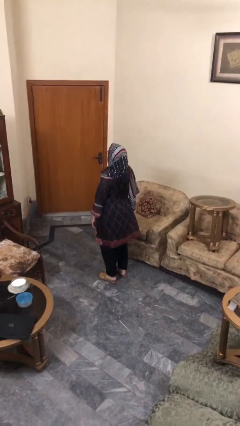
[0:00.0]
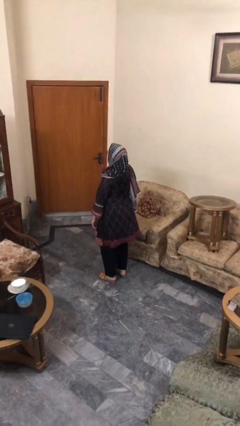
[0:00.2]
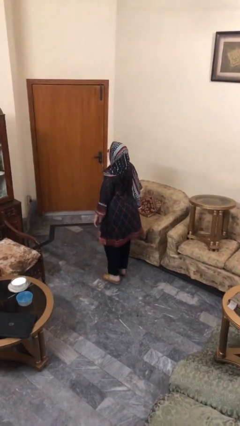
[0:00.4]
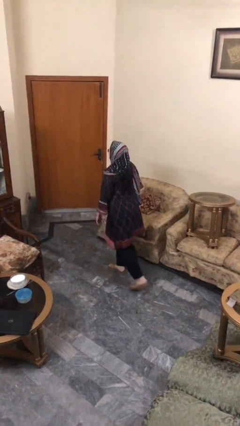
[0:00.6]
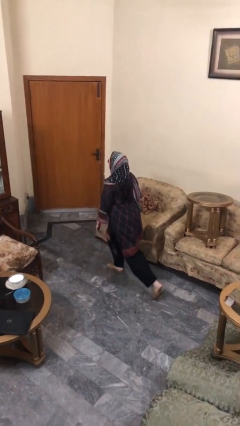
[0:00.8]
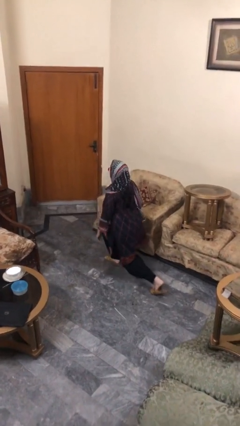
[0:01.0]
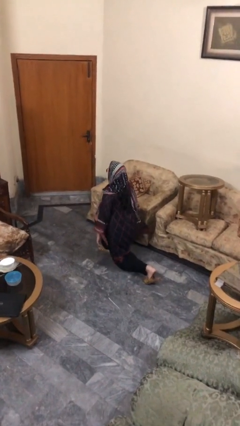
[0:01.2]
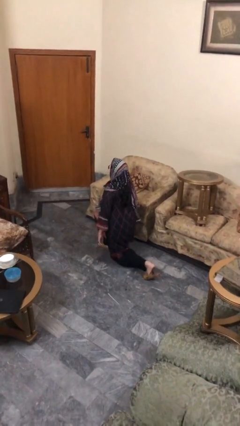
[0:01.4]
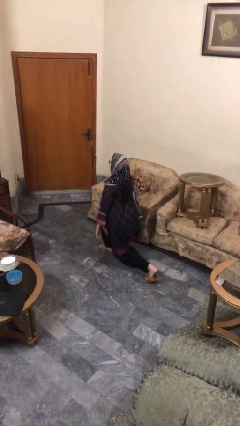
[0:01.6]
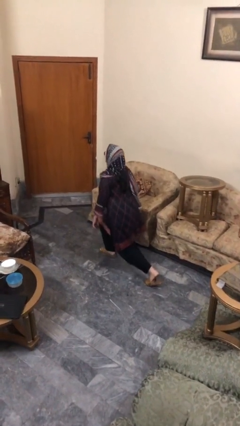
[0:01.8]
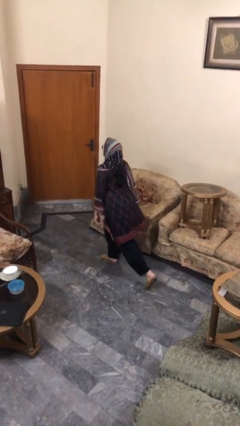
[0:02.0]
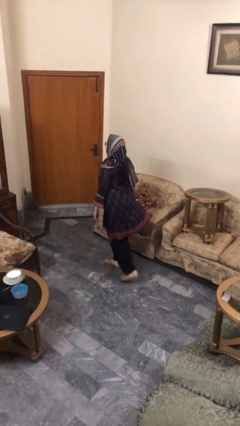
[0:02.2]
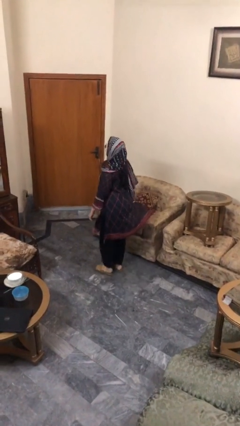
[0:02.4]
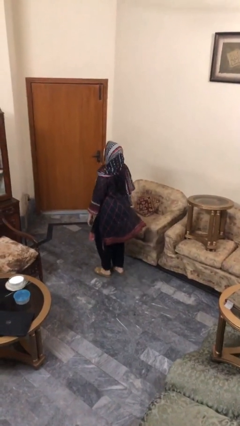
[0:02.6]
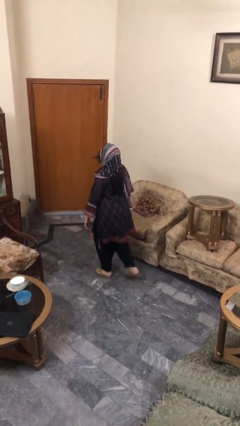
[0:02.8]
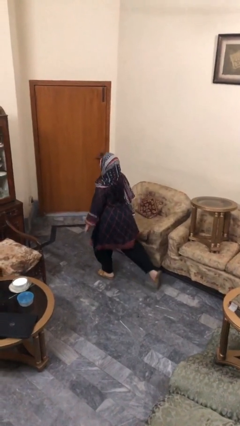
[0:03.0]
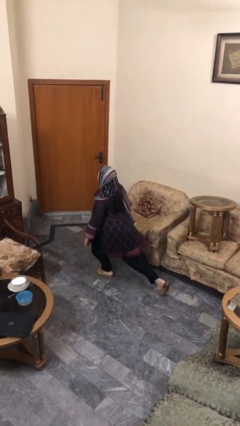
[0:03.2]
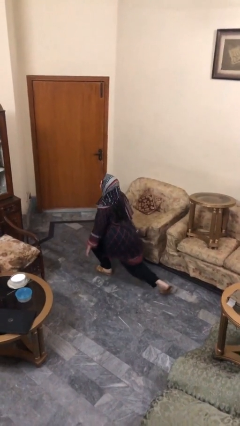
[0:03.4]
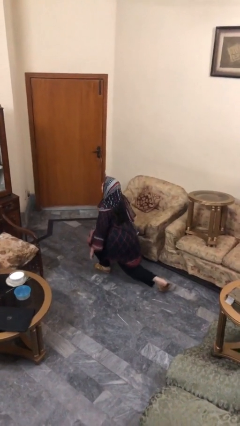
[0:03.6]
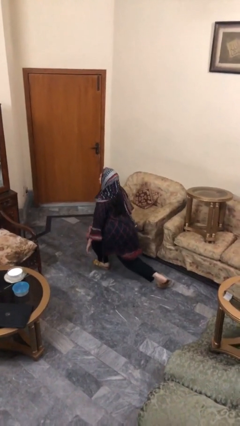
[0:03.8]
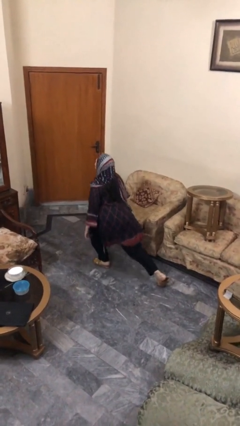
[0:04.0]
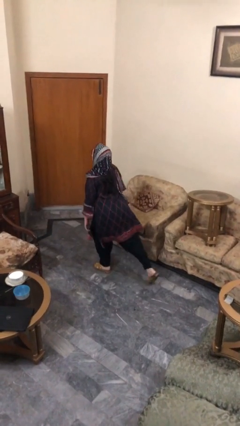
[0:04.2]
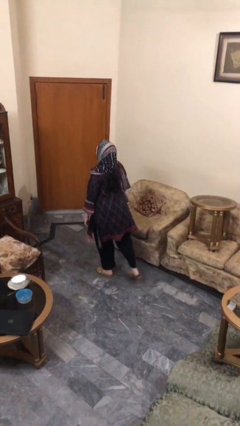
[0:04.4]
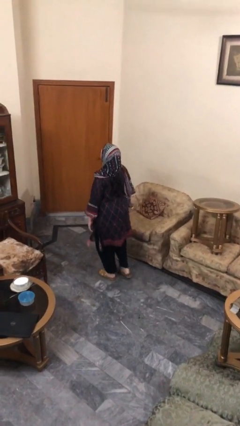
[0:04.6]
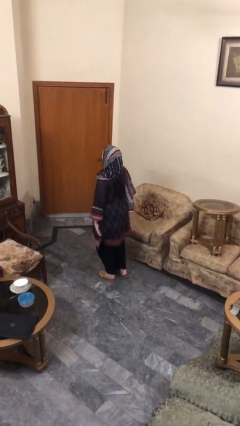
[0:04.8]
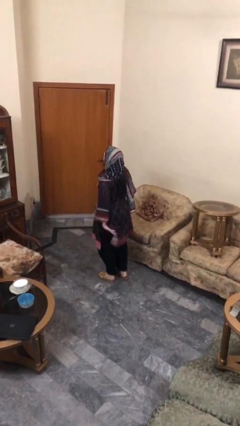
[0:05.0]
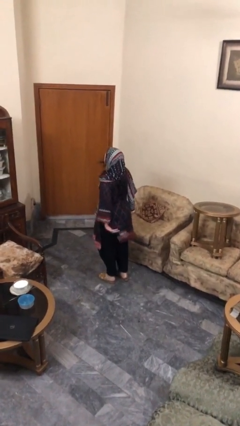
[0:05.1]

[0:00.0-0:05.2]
person exercises with lunges

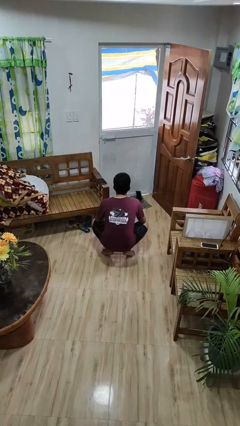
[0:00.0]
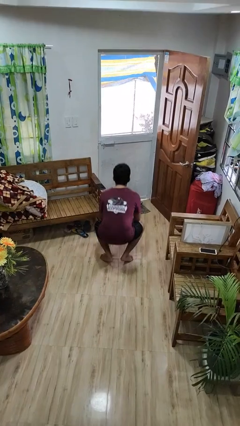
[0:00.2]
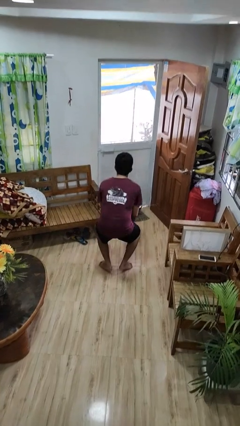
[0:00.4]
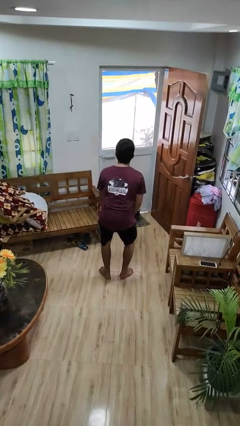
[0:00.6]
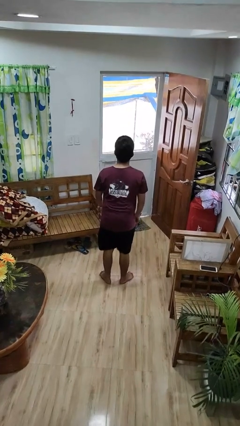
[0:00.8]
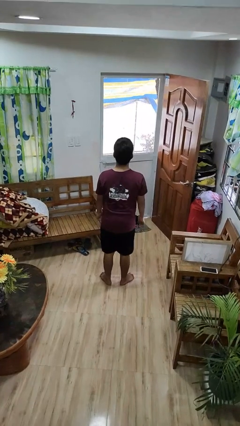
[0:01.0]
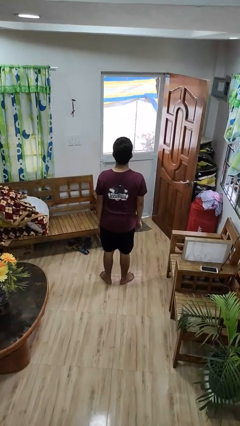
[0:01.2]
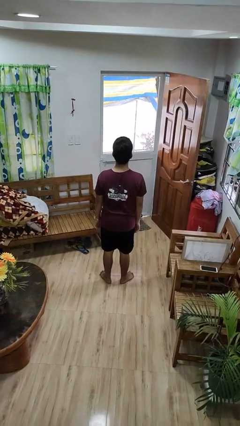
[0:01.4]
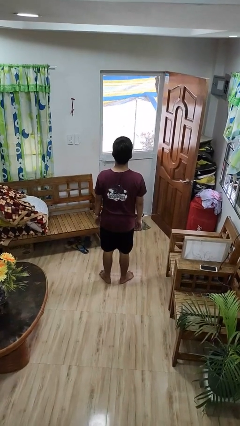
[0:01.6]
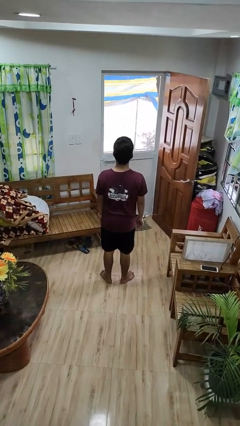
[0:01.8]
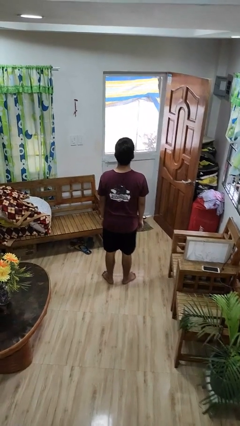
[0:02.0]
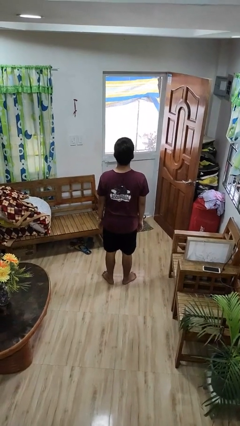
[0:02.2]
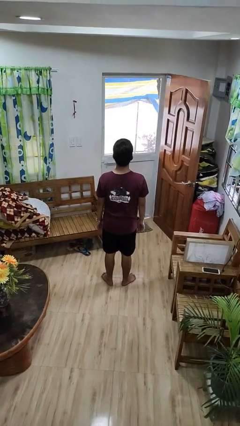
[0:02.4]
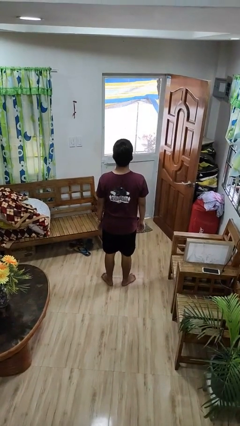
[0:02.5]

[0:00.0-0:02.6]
person stands up

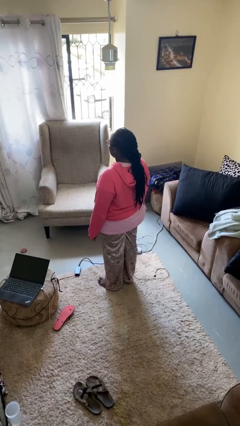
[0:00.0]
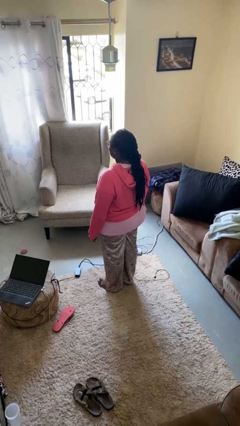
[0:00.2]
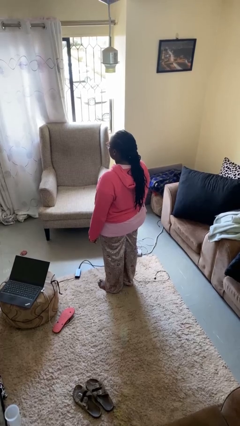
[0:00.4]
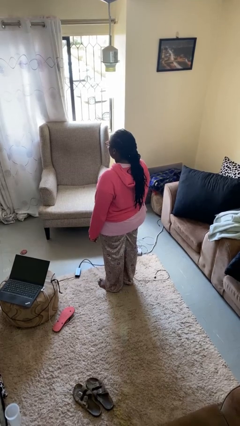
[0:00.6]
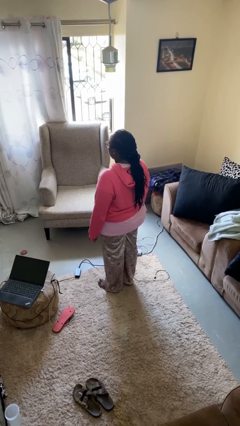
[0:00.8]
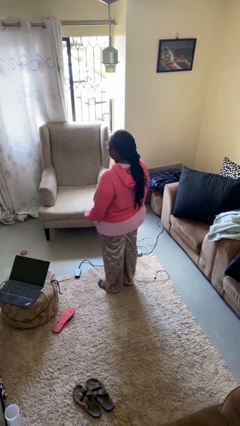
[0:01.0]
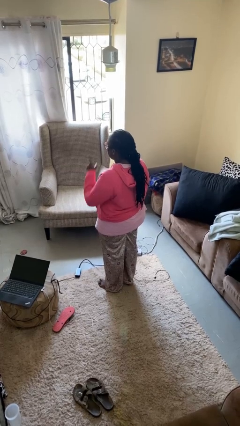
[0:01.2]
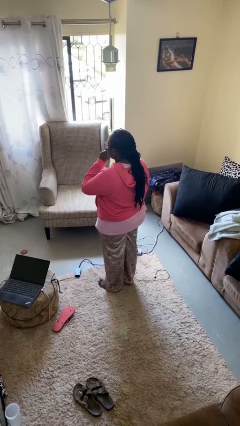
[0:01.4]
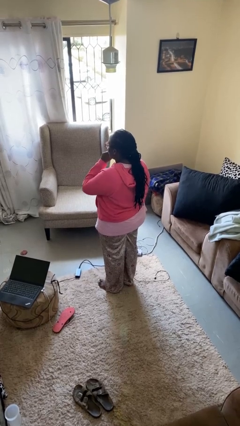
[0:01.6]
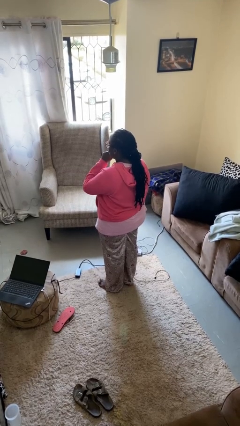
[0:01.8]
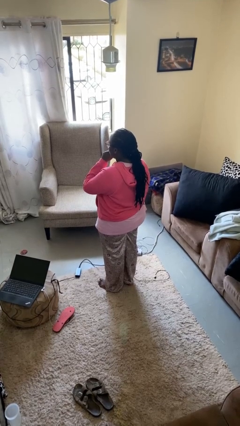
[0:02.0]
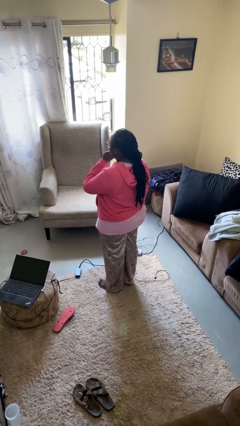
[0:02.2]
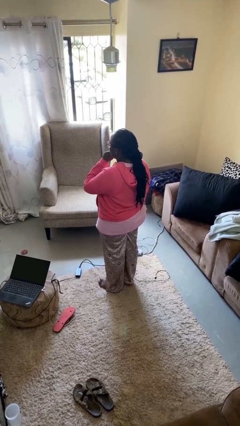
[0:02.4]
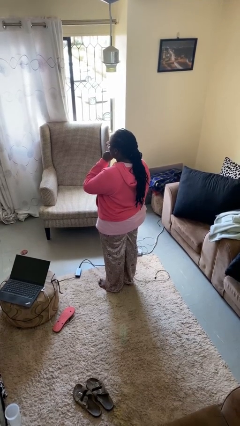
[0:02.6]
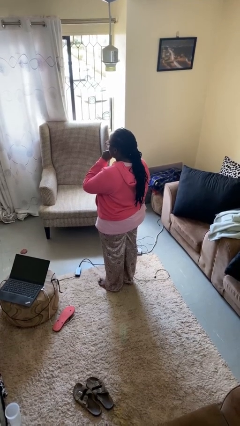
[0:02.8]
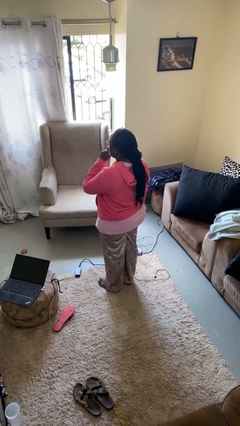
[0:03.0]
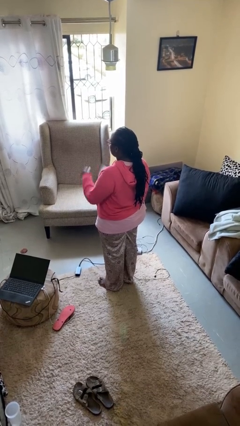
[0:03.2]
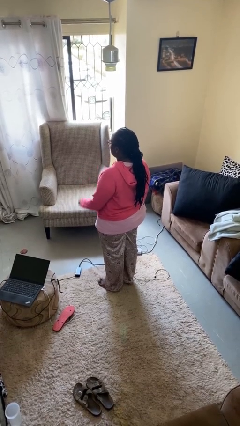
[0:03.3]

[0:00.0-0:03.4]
person gestures be quiet

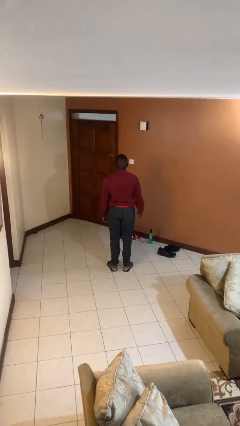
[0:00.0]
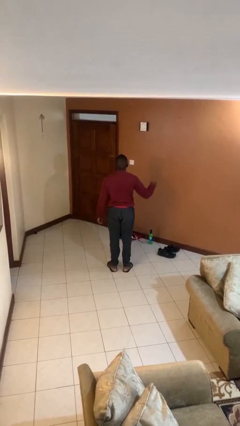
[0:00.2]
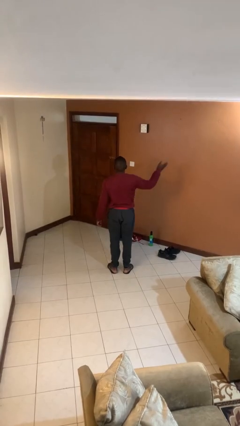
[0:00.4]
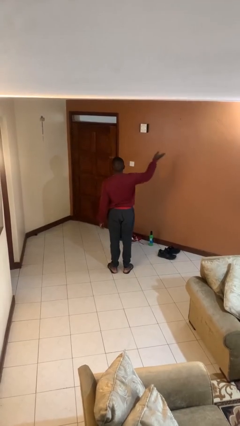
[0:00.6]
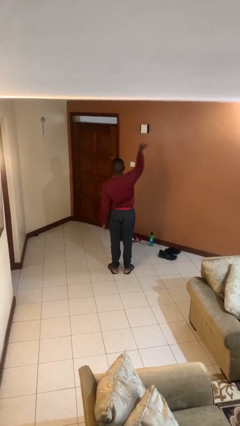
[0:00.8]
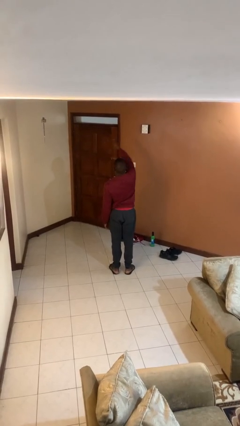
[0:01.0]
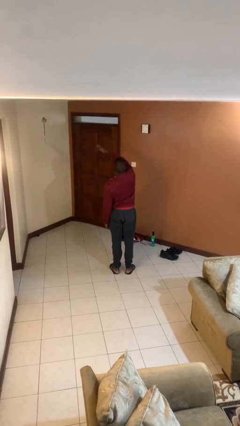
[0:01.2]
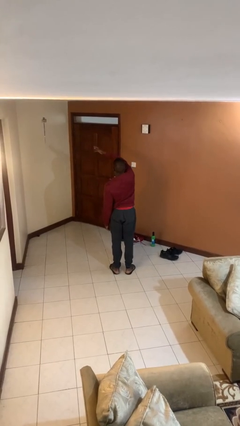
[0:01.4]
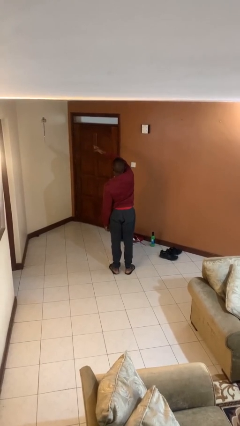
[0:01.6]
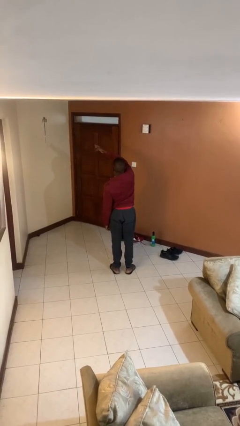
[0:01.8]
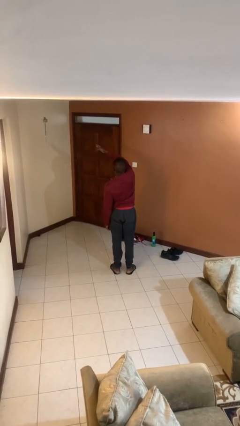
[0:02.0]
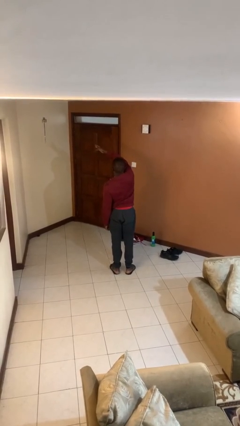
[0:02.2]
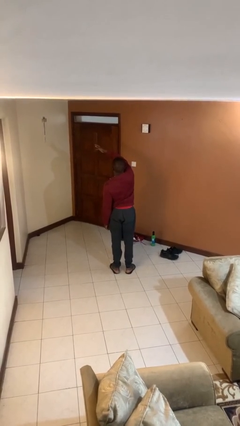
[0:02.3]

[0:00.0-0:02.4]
person gestures swipe left

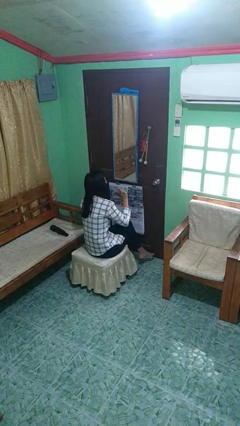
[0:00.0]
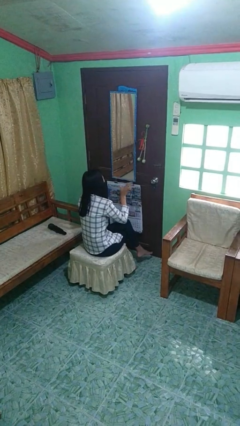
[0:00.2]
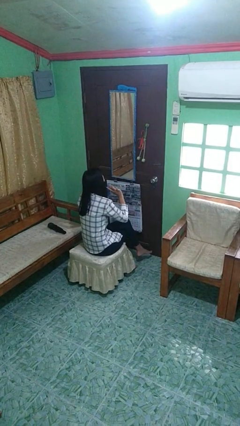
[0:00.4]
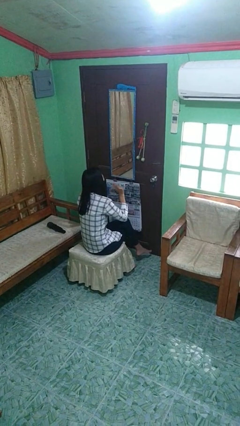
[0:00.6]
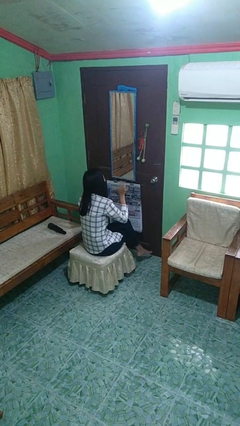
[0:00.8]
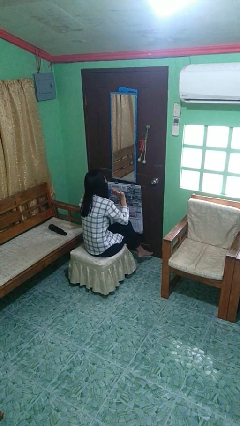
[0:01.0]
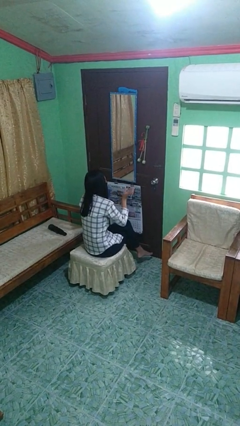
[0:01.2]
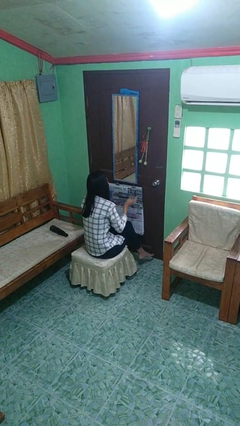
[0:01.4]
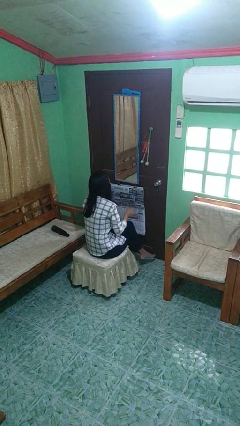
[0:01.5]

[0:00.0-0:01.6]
person waves hand over object

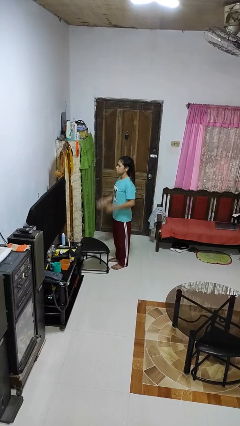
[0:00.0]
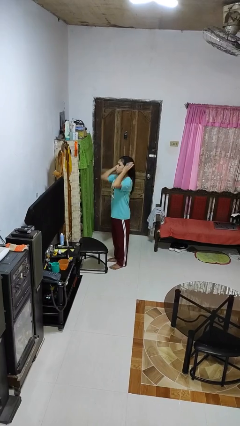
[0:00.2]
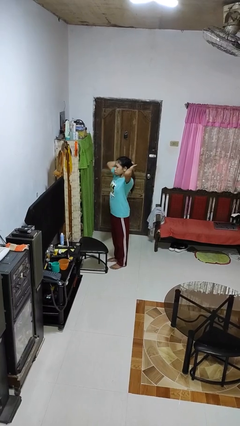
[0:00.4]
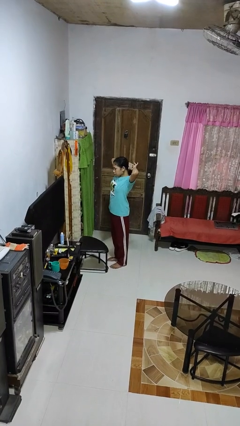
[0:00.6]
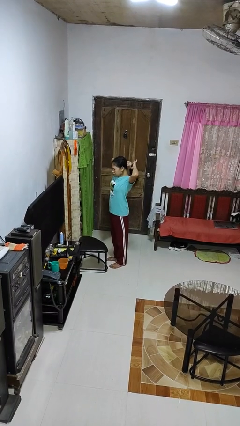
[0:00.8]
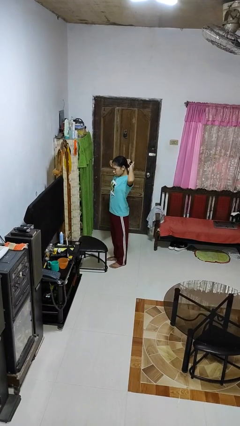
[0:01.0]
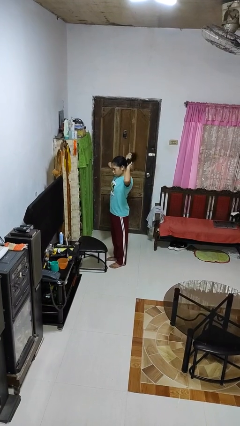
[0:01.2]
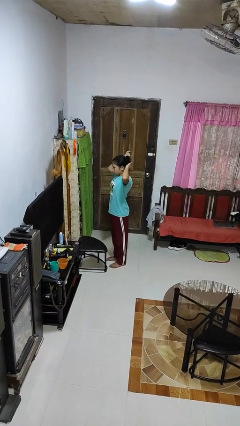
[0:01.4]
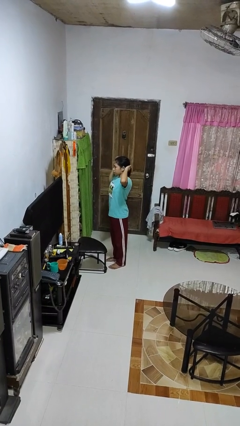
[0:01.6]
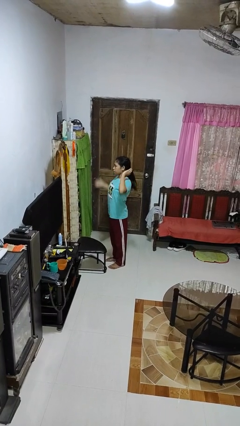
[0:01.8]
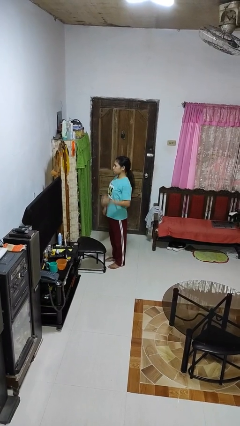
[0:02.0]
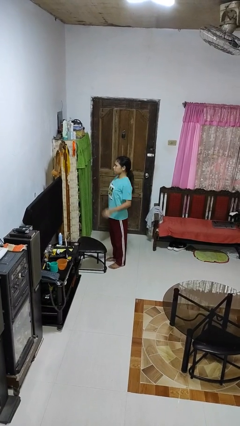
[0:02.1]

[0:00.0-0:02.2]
person puts hair in ponytail
